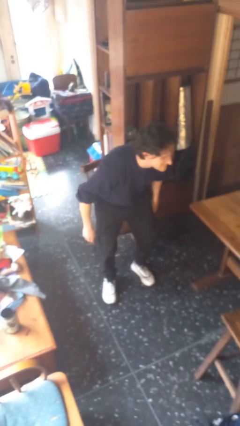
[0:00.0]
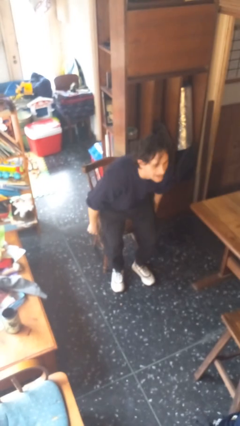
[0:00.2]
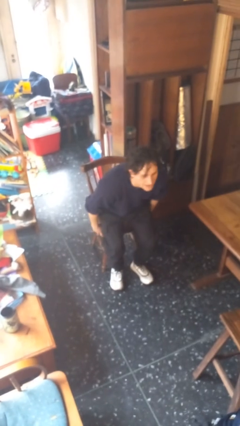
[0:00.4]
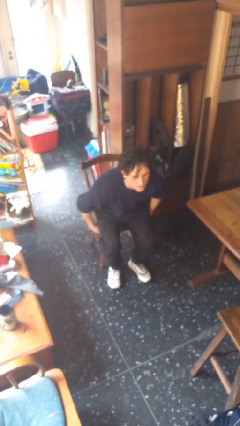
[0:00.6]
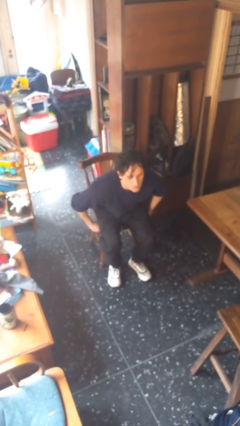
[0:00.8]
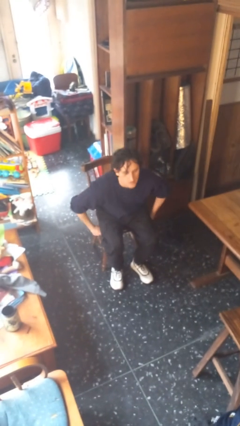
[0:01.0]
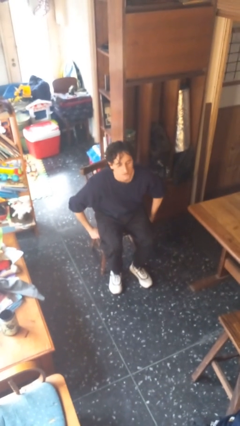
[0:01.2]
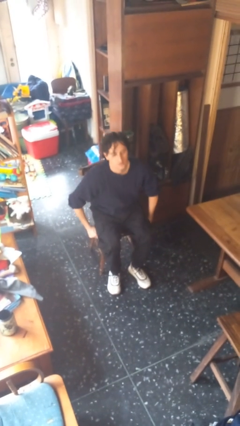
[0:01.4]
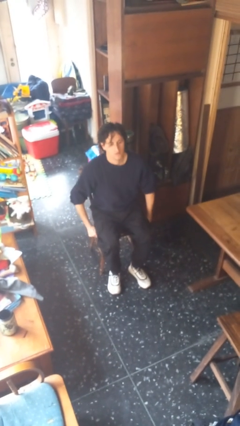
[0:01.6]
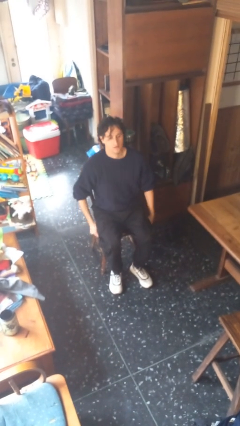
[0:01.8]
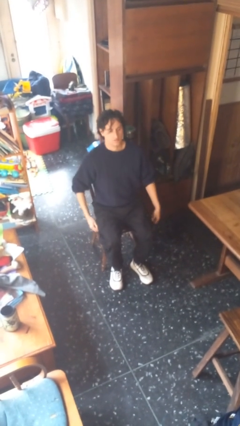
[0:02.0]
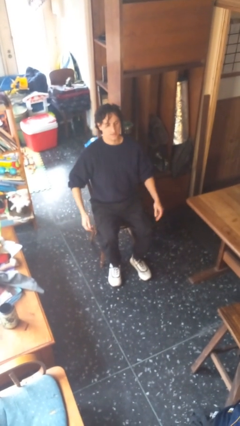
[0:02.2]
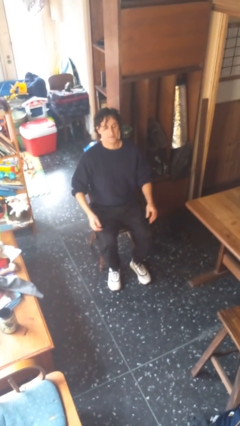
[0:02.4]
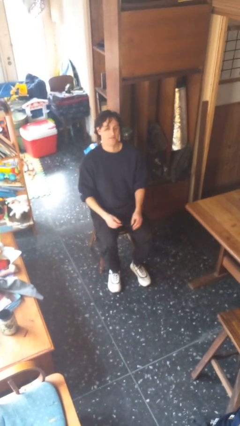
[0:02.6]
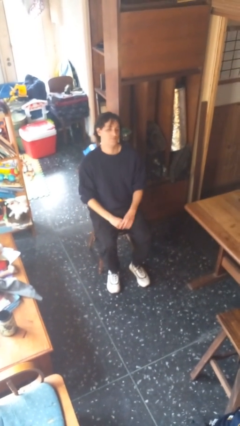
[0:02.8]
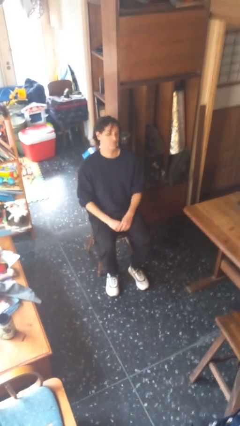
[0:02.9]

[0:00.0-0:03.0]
person sits down

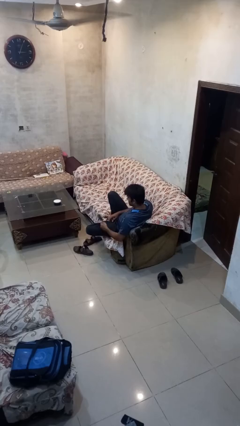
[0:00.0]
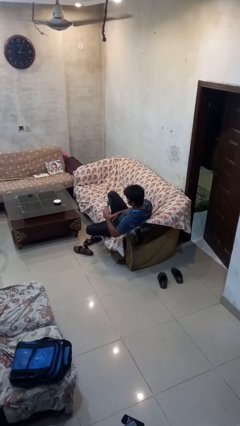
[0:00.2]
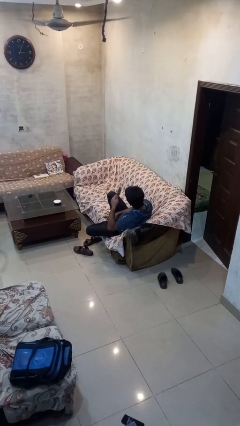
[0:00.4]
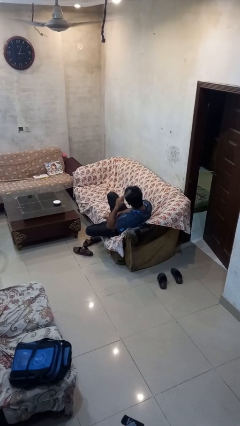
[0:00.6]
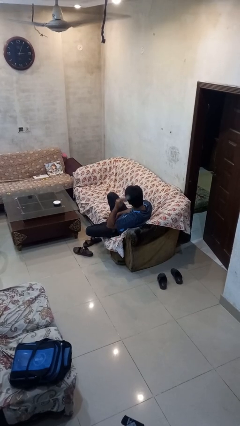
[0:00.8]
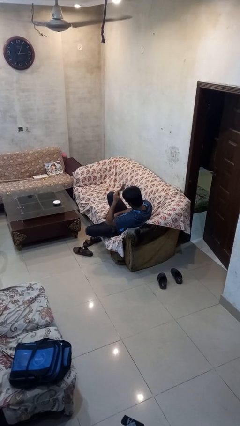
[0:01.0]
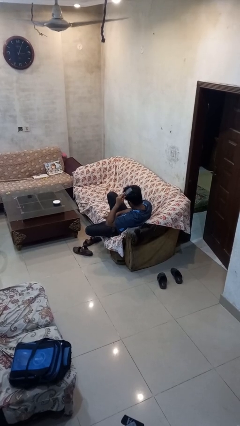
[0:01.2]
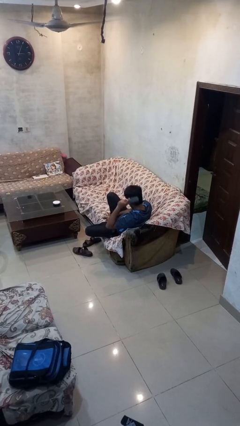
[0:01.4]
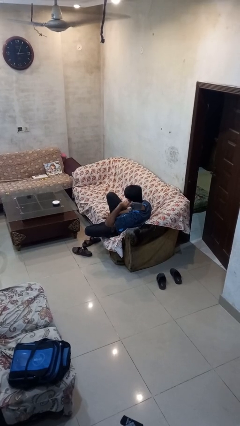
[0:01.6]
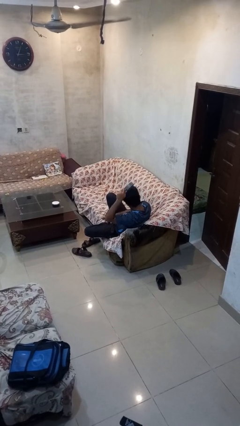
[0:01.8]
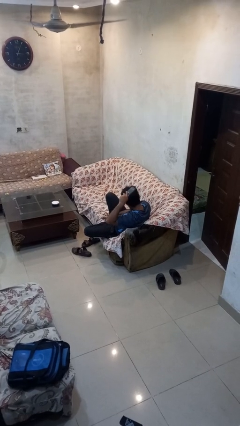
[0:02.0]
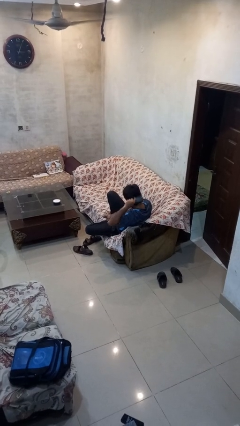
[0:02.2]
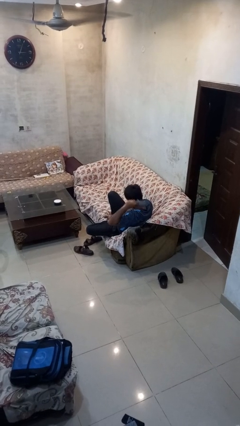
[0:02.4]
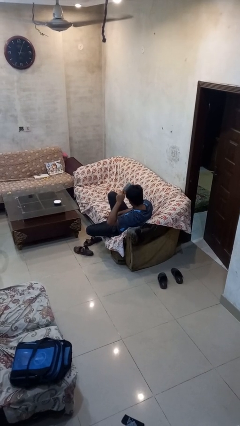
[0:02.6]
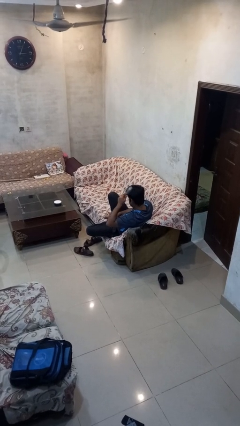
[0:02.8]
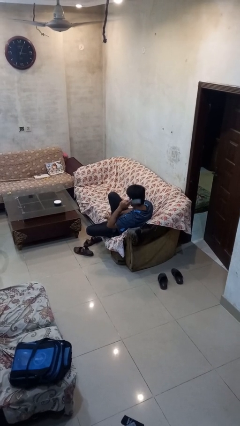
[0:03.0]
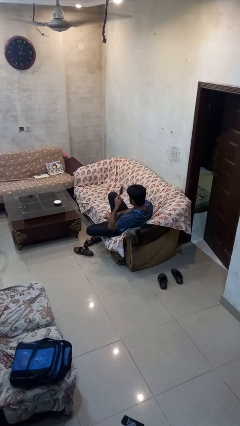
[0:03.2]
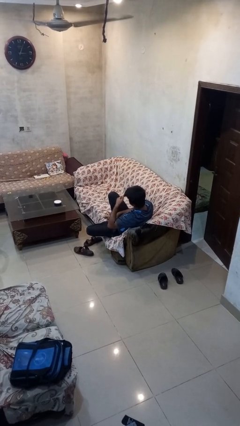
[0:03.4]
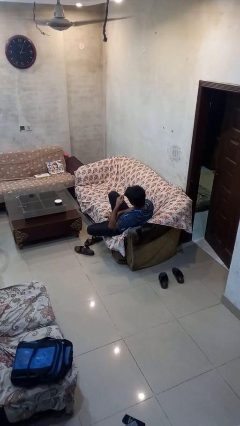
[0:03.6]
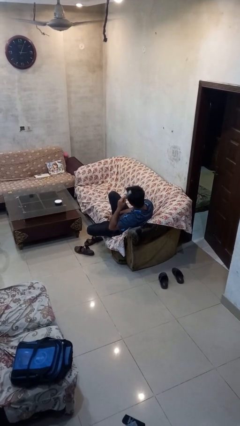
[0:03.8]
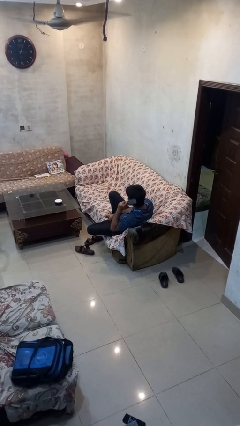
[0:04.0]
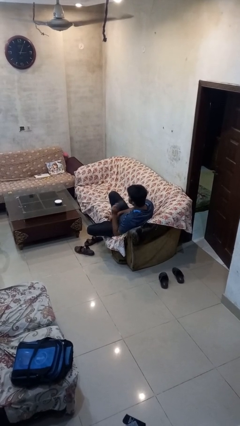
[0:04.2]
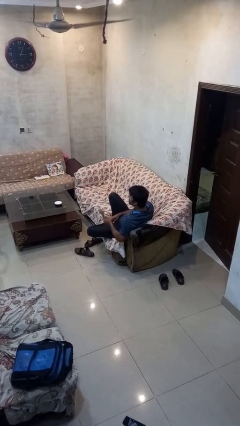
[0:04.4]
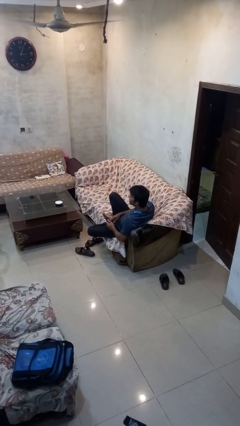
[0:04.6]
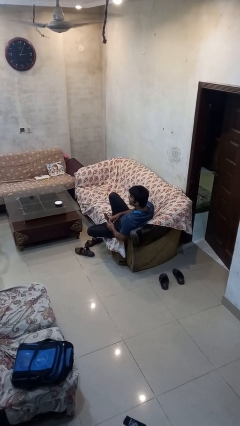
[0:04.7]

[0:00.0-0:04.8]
person brushes hair

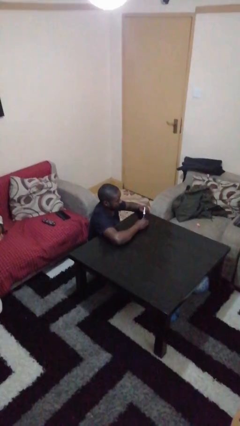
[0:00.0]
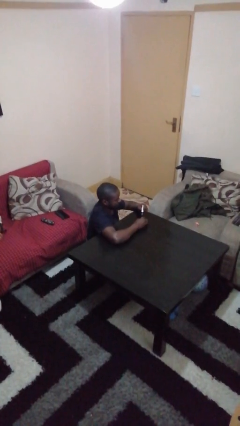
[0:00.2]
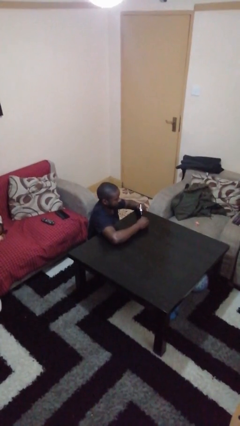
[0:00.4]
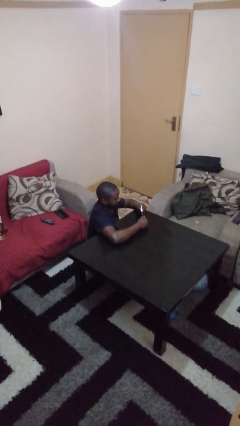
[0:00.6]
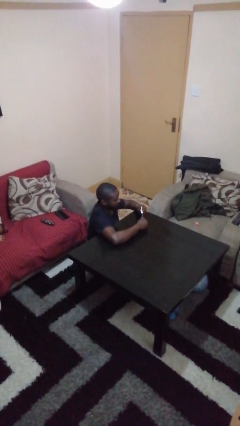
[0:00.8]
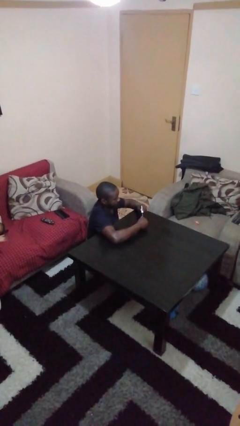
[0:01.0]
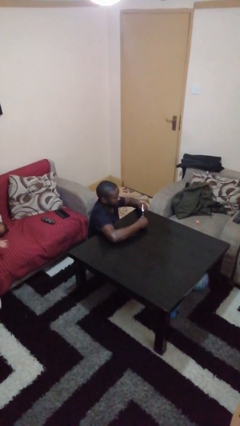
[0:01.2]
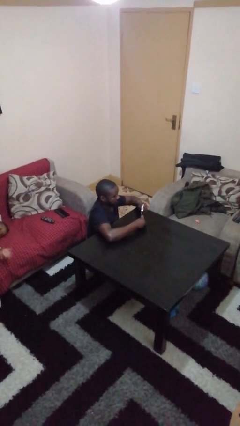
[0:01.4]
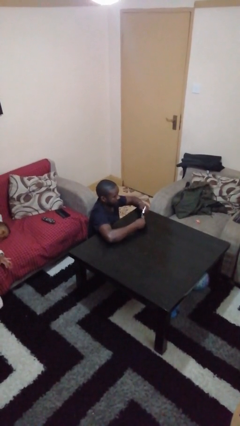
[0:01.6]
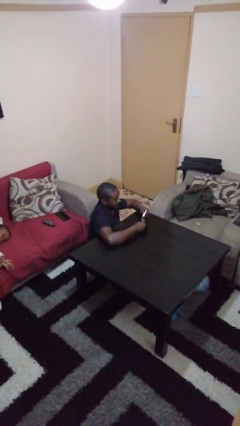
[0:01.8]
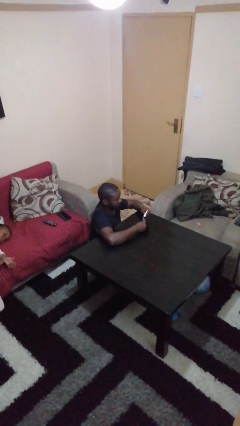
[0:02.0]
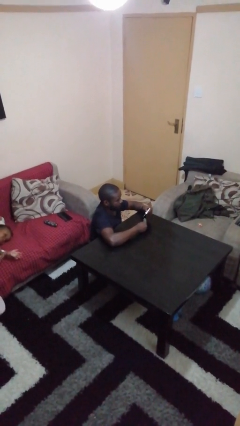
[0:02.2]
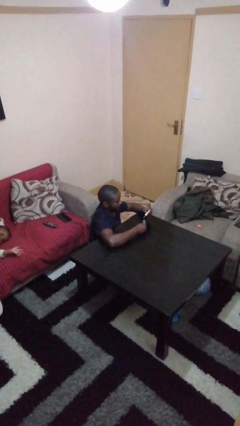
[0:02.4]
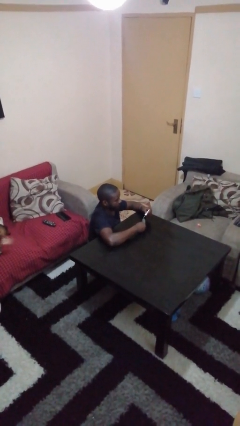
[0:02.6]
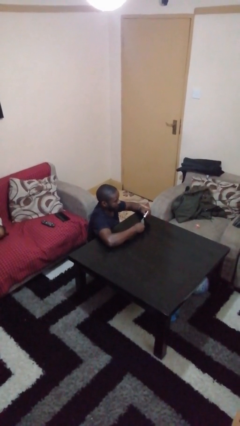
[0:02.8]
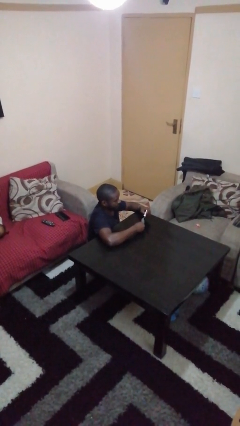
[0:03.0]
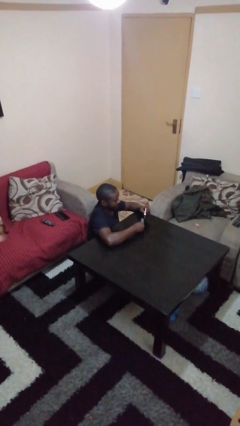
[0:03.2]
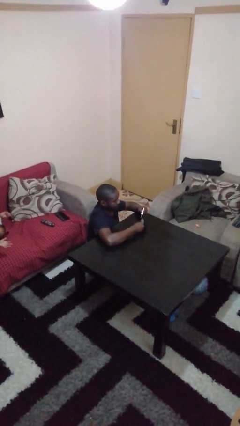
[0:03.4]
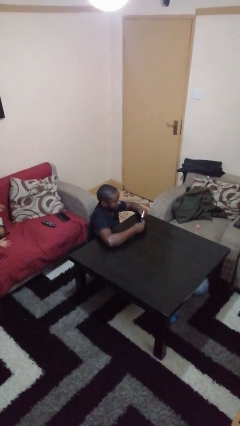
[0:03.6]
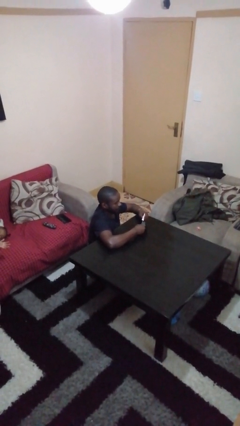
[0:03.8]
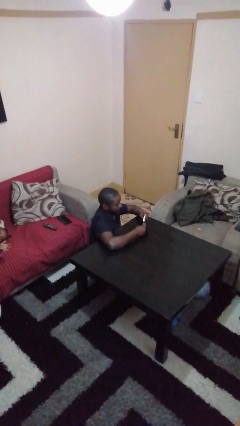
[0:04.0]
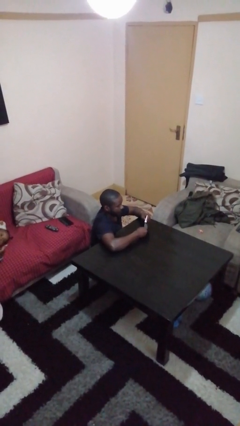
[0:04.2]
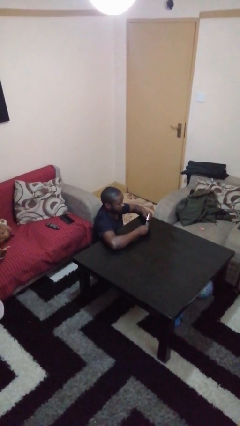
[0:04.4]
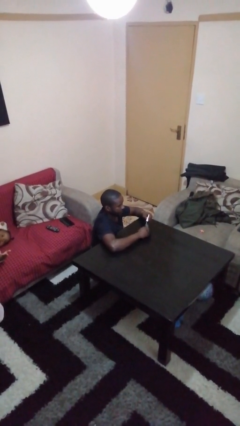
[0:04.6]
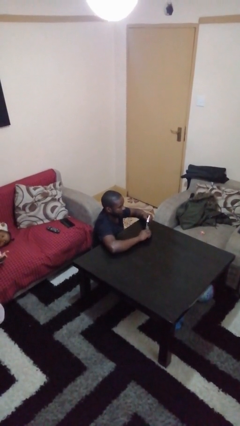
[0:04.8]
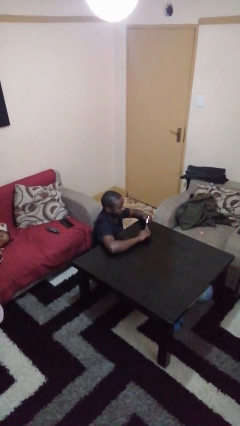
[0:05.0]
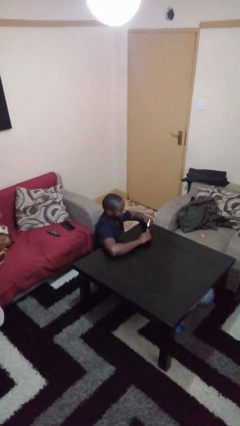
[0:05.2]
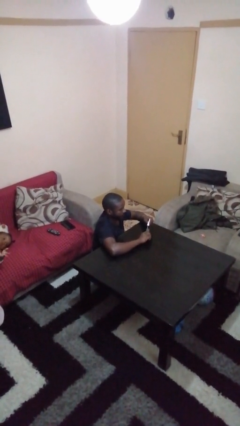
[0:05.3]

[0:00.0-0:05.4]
person paints fingernails

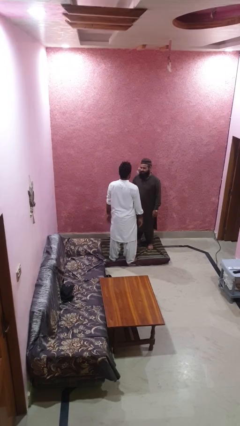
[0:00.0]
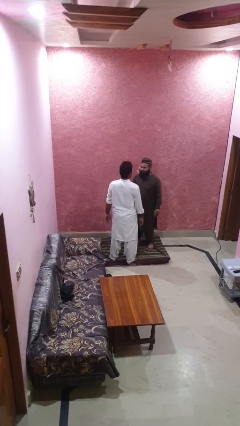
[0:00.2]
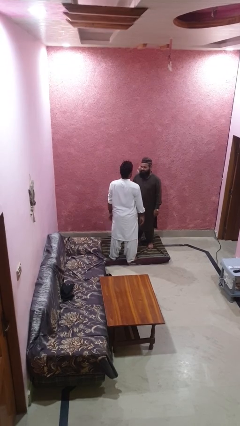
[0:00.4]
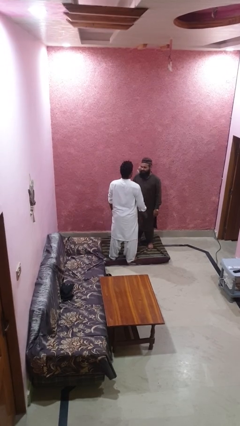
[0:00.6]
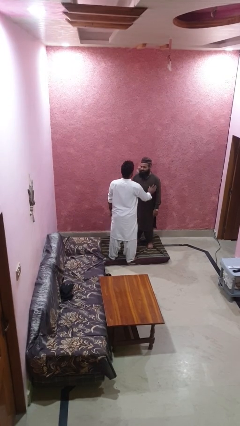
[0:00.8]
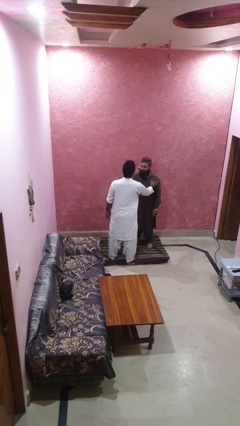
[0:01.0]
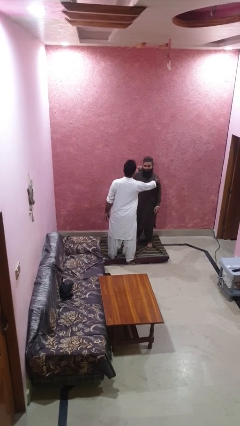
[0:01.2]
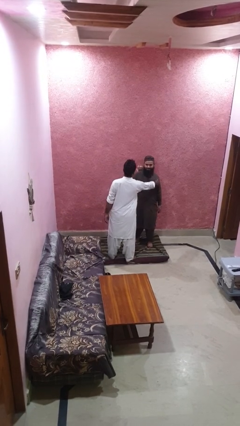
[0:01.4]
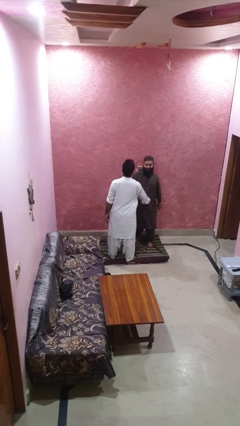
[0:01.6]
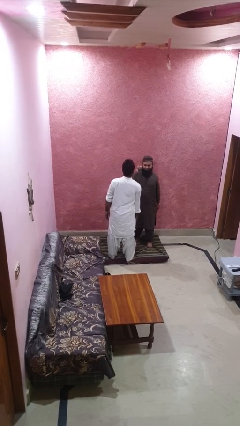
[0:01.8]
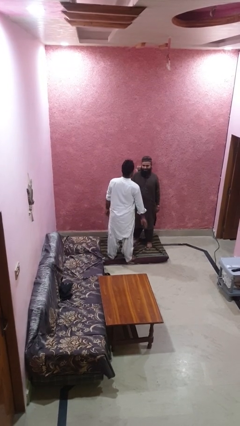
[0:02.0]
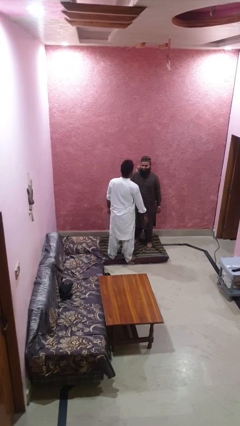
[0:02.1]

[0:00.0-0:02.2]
person shoves person

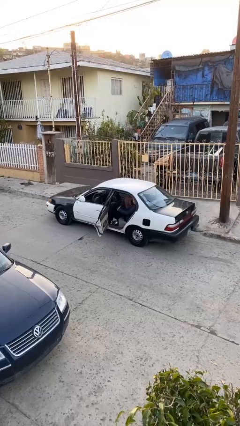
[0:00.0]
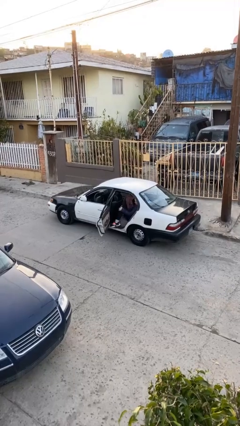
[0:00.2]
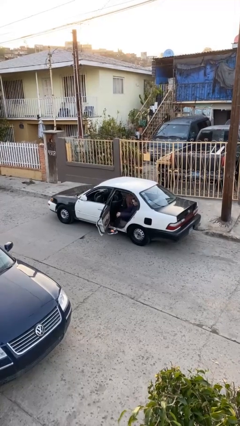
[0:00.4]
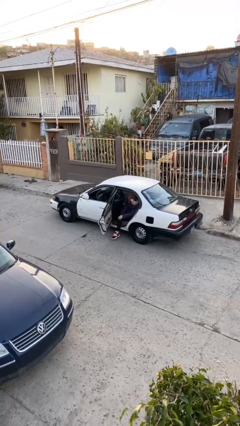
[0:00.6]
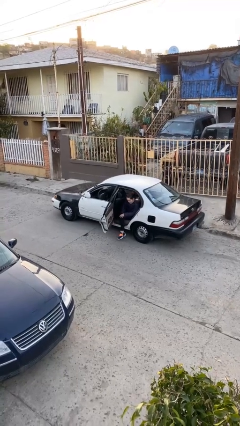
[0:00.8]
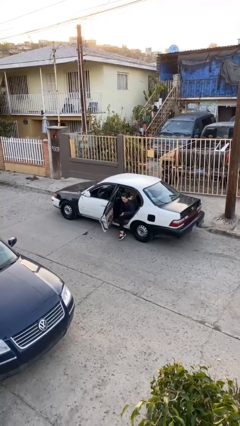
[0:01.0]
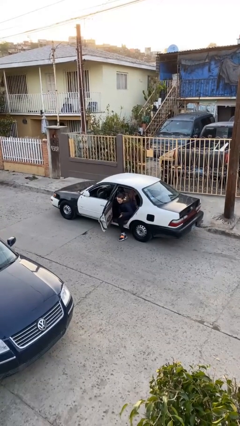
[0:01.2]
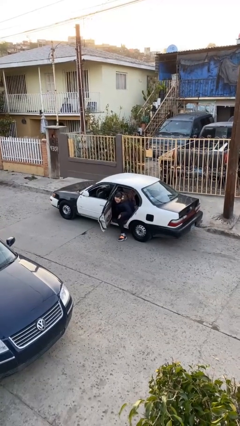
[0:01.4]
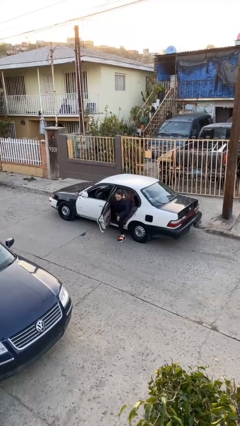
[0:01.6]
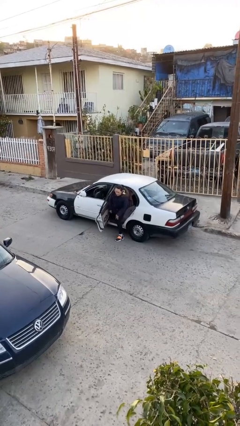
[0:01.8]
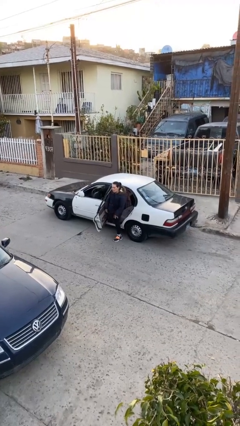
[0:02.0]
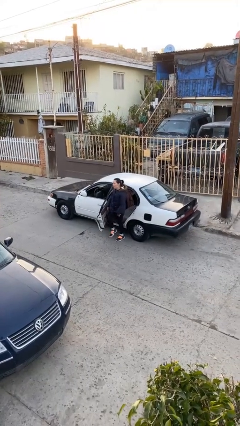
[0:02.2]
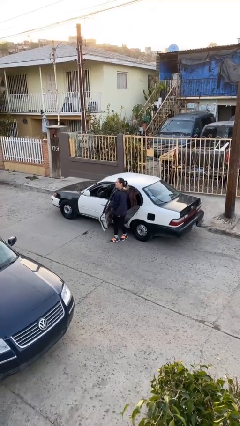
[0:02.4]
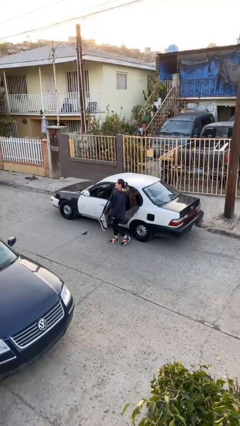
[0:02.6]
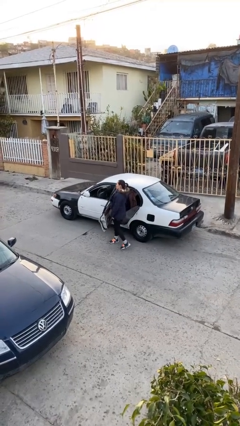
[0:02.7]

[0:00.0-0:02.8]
person exits car
